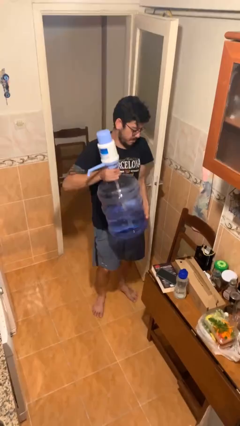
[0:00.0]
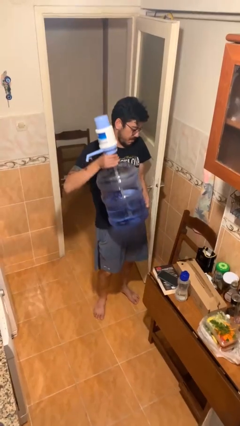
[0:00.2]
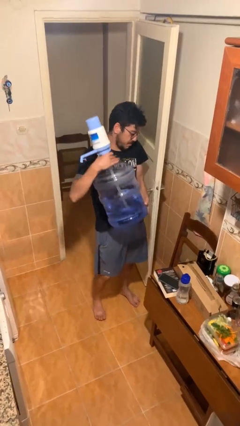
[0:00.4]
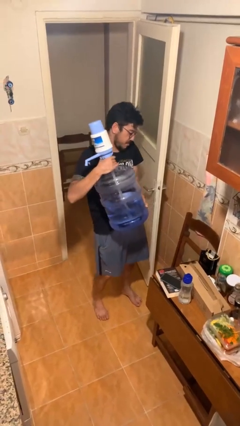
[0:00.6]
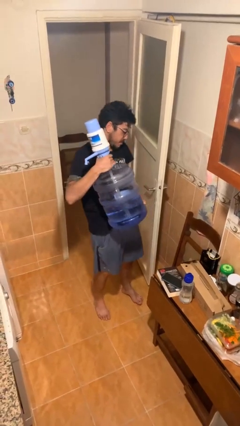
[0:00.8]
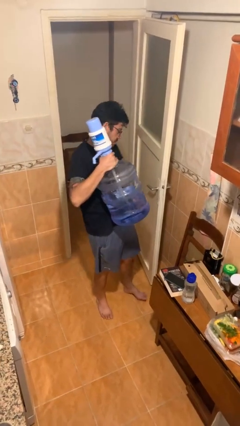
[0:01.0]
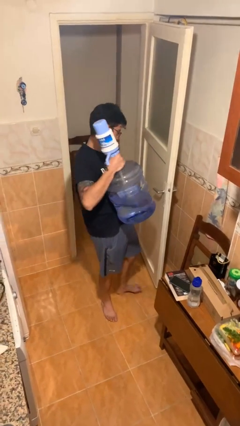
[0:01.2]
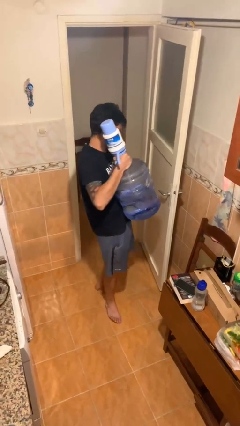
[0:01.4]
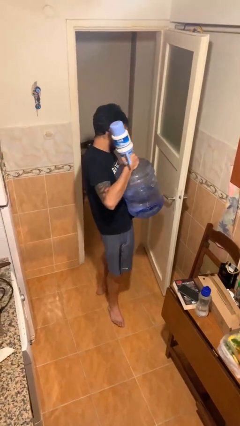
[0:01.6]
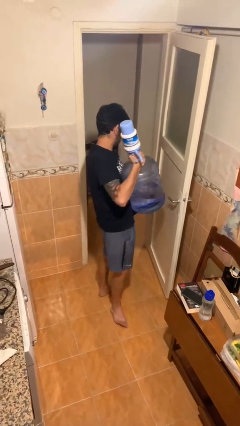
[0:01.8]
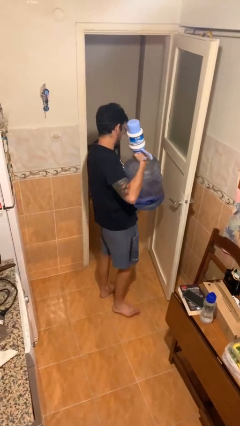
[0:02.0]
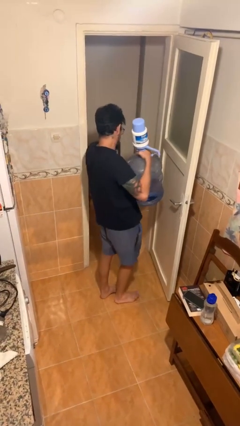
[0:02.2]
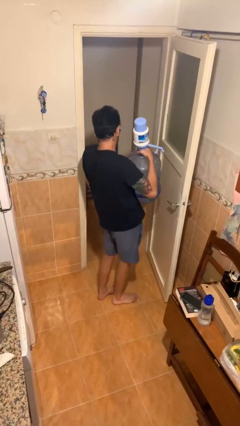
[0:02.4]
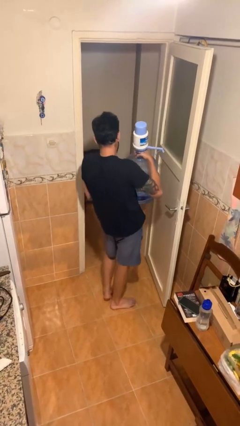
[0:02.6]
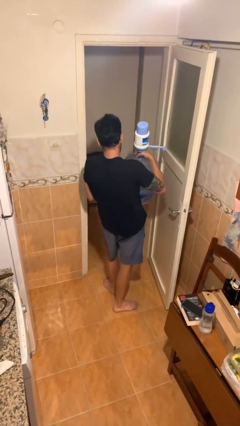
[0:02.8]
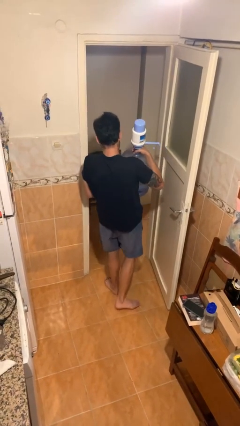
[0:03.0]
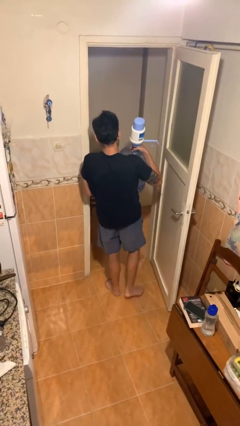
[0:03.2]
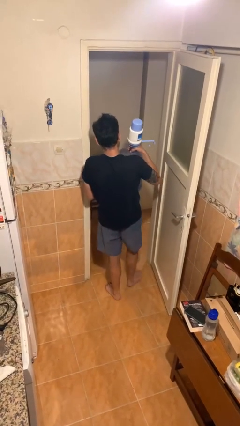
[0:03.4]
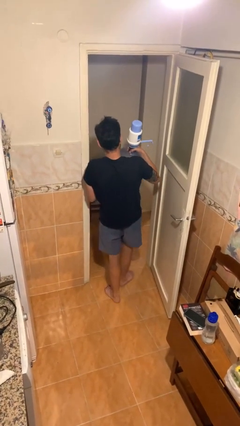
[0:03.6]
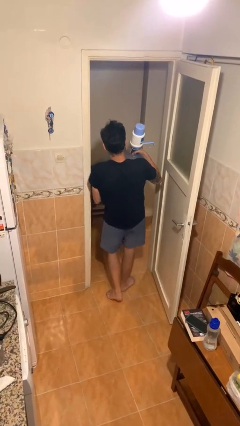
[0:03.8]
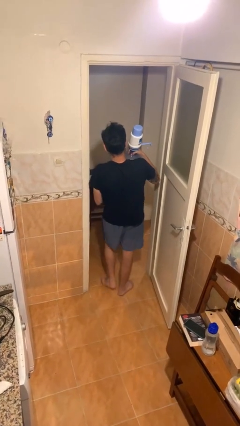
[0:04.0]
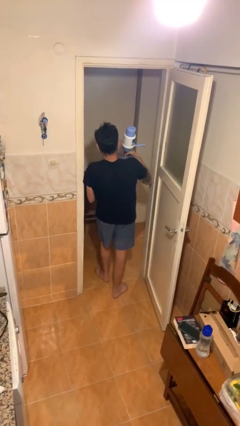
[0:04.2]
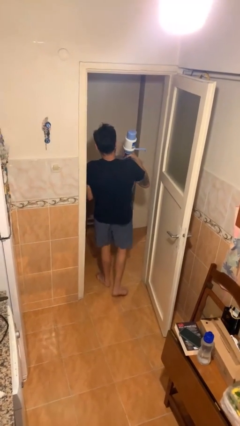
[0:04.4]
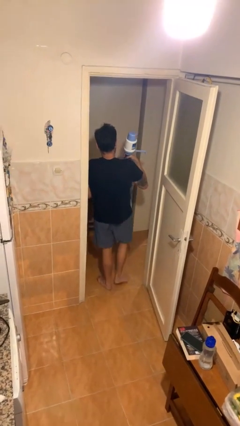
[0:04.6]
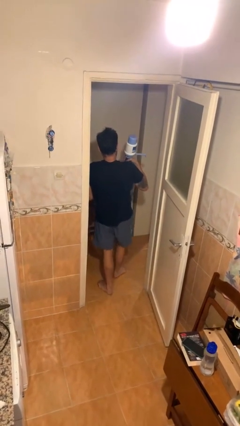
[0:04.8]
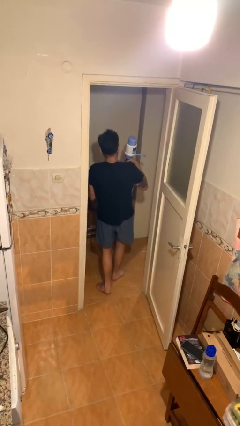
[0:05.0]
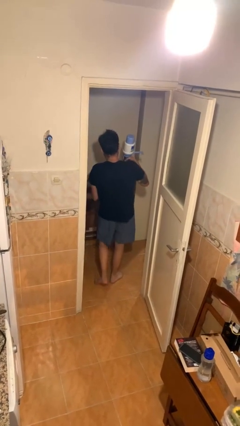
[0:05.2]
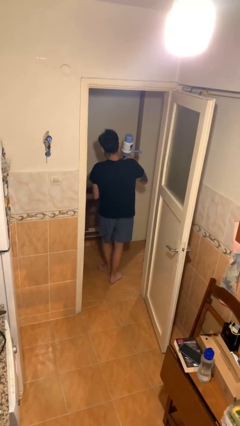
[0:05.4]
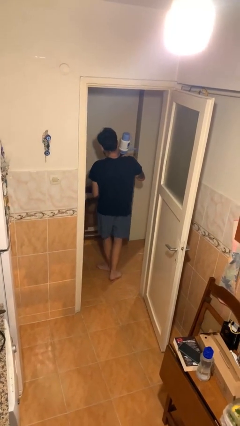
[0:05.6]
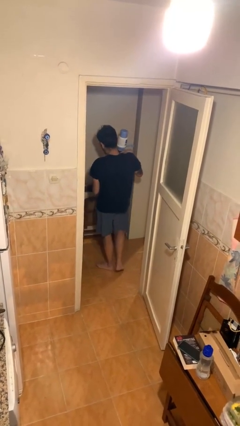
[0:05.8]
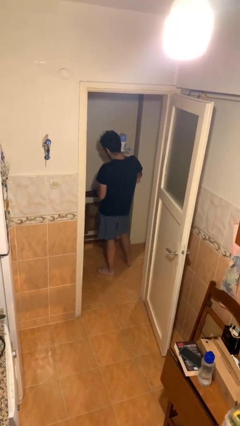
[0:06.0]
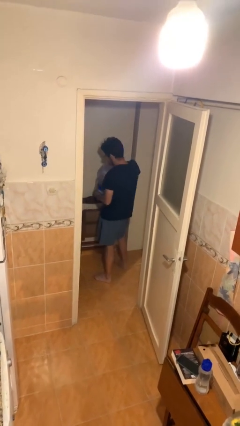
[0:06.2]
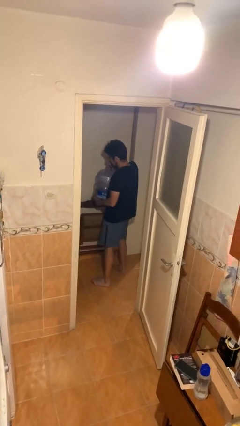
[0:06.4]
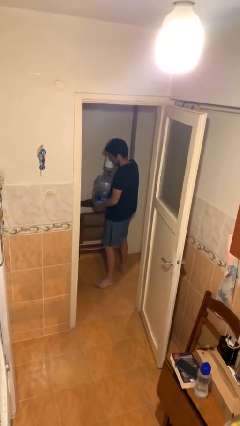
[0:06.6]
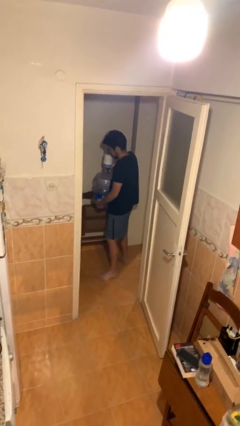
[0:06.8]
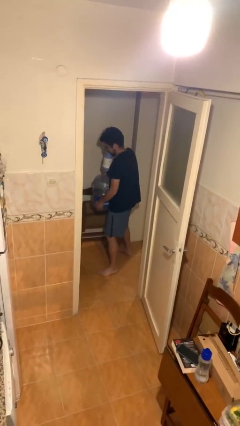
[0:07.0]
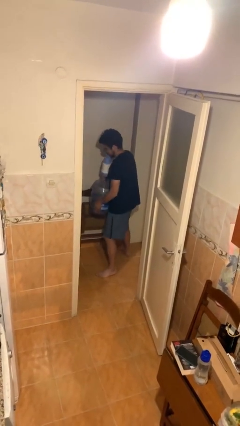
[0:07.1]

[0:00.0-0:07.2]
person carries heavy object

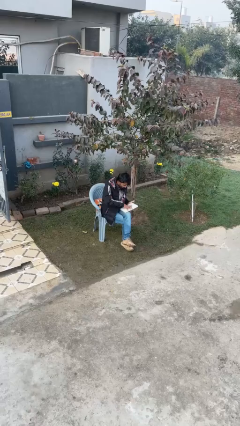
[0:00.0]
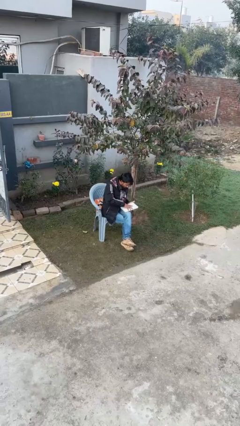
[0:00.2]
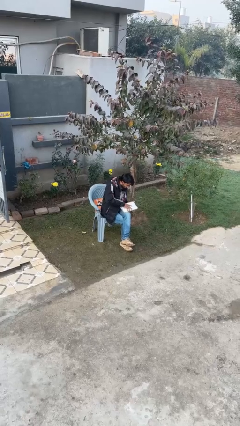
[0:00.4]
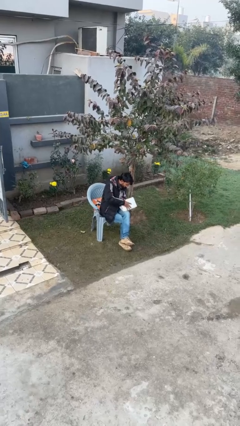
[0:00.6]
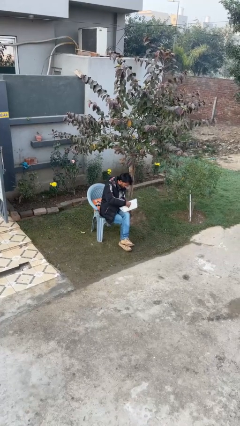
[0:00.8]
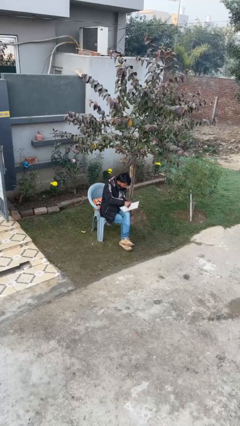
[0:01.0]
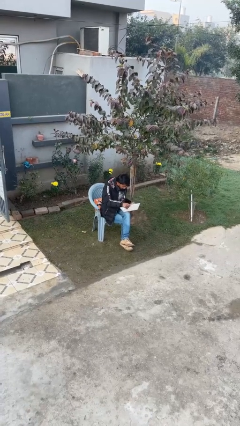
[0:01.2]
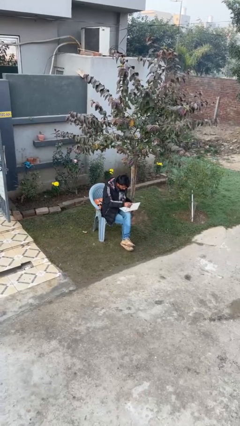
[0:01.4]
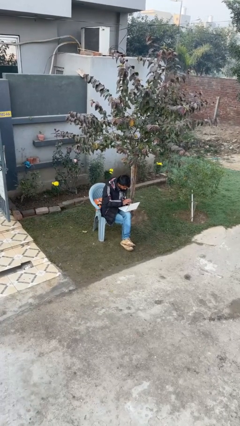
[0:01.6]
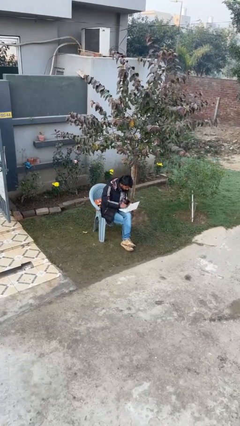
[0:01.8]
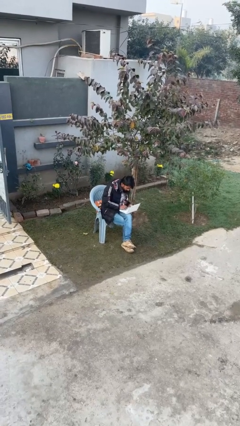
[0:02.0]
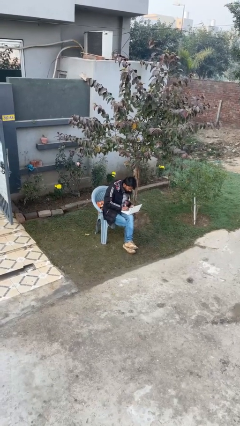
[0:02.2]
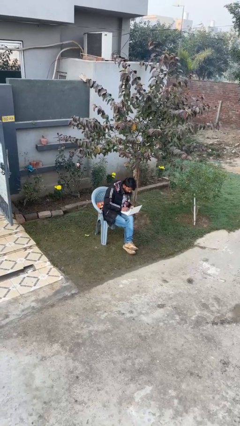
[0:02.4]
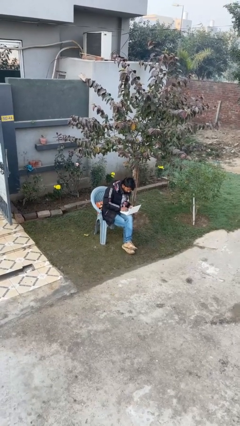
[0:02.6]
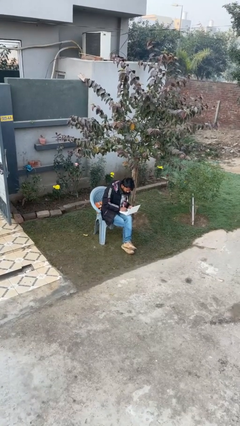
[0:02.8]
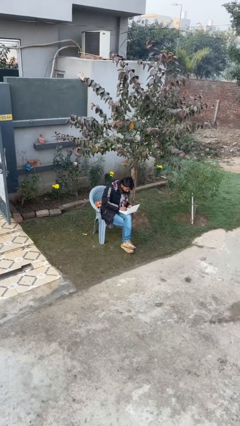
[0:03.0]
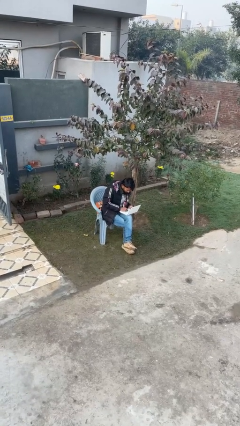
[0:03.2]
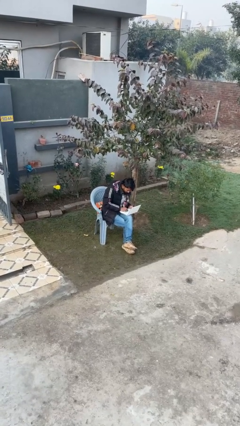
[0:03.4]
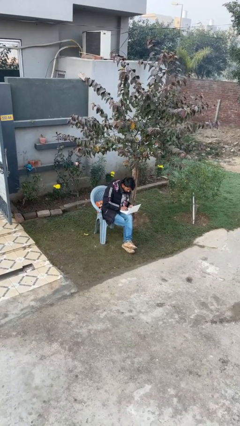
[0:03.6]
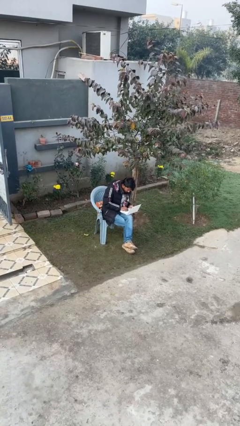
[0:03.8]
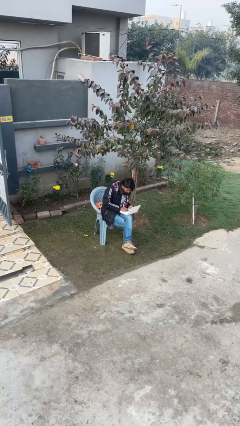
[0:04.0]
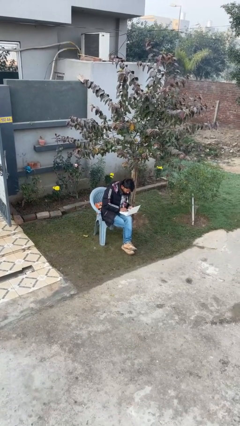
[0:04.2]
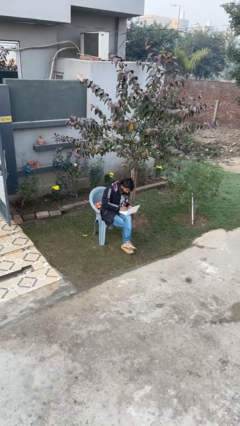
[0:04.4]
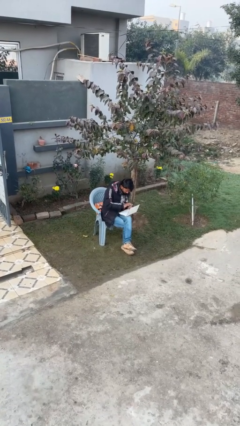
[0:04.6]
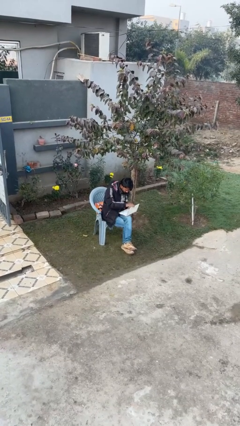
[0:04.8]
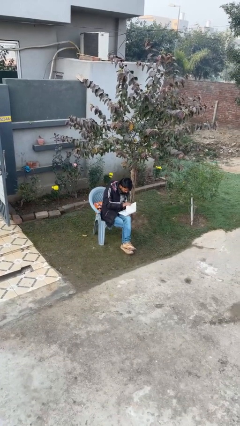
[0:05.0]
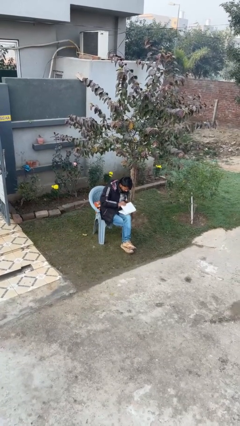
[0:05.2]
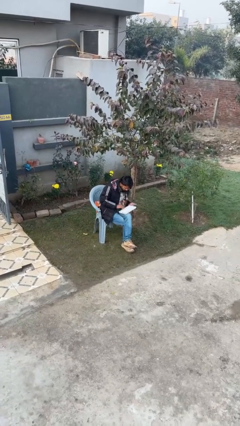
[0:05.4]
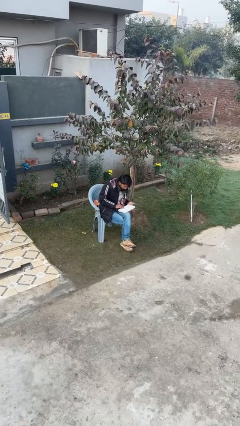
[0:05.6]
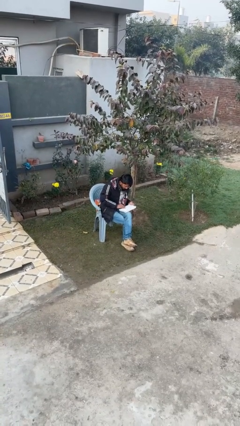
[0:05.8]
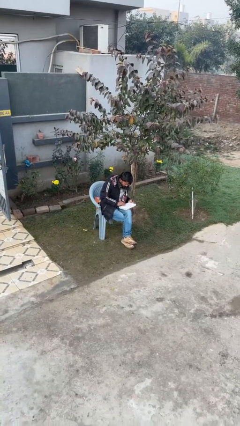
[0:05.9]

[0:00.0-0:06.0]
person interacts with laptop

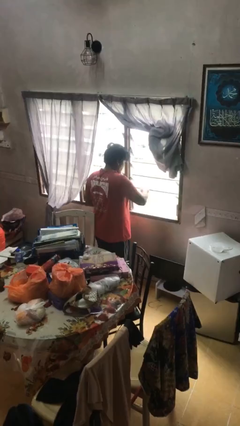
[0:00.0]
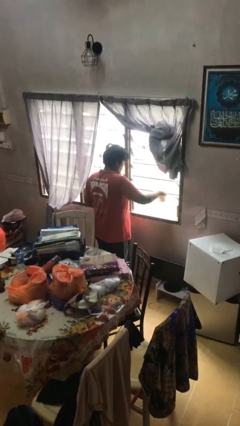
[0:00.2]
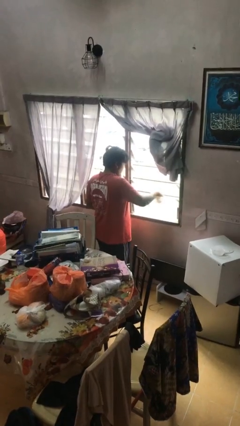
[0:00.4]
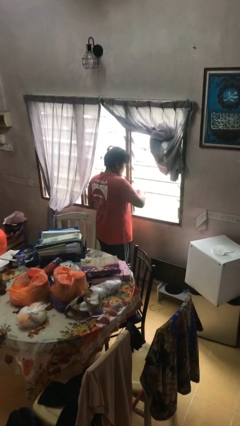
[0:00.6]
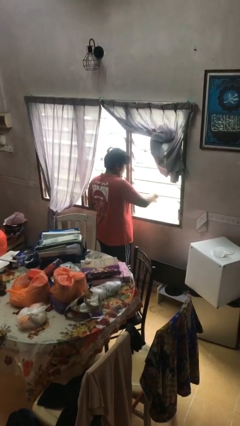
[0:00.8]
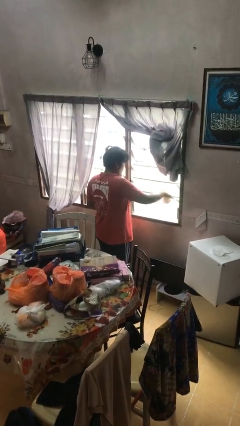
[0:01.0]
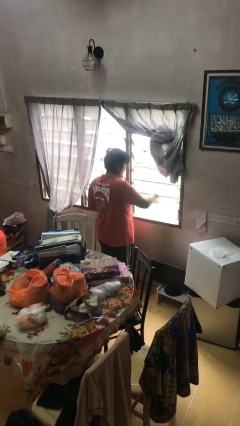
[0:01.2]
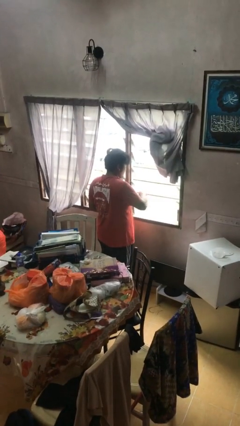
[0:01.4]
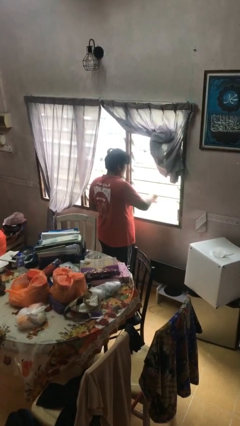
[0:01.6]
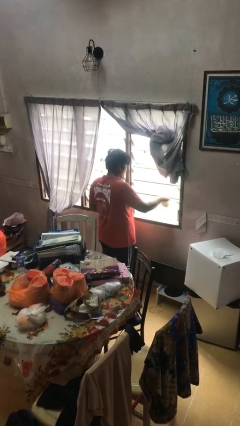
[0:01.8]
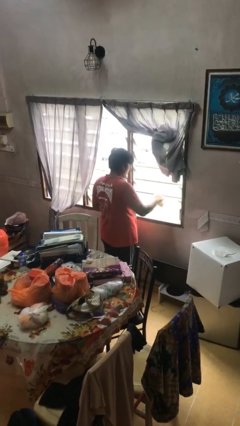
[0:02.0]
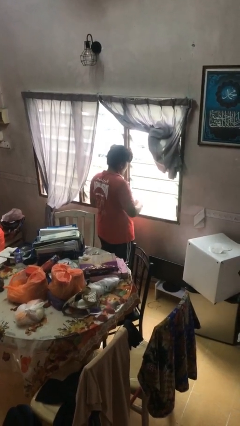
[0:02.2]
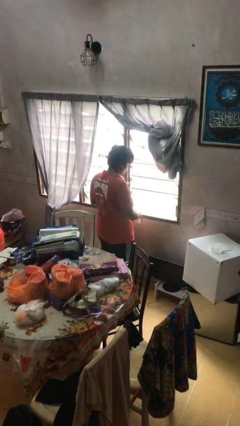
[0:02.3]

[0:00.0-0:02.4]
person washes window

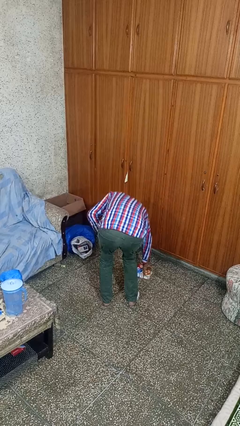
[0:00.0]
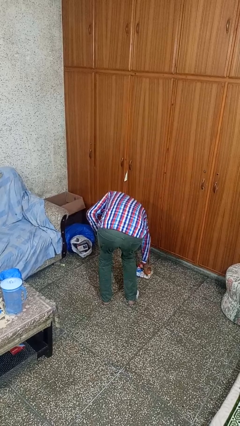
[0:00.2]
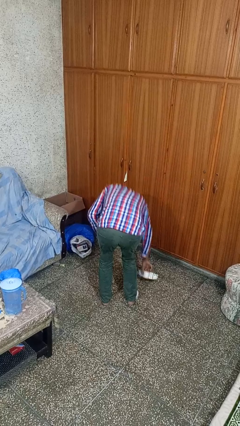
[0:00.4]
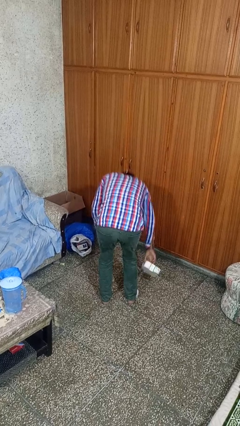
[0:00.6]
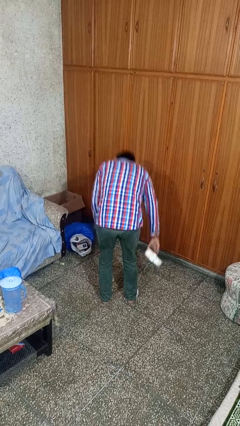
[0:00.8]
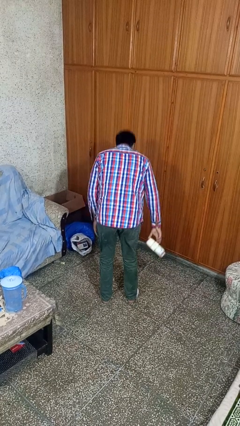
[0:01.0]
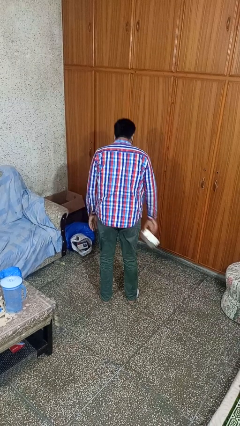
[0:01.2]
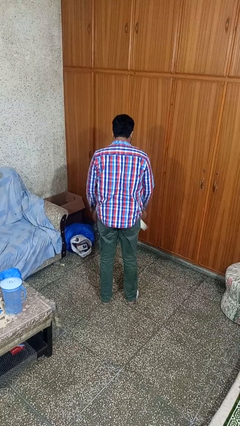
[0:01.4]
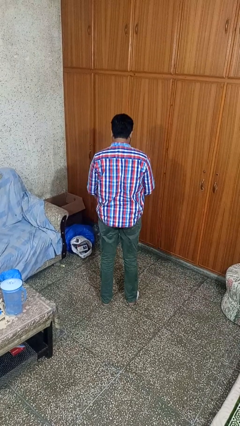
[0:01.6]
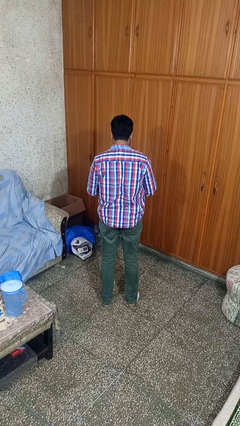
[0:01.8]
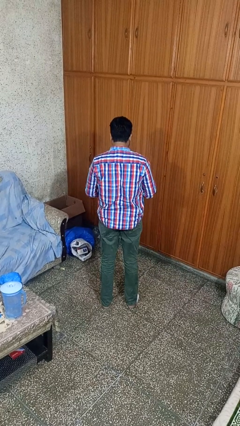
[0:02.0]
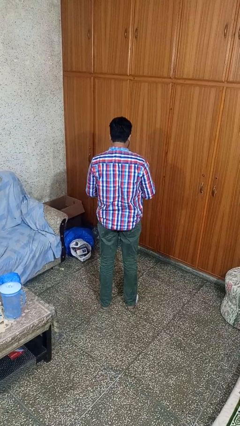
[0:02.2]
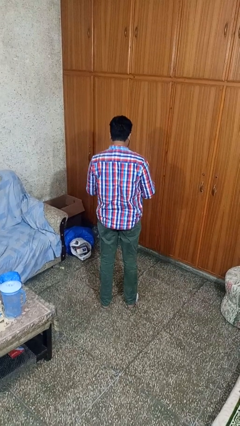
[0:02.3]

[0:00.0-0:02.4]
person picks up object from floor

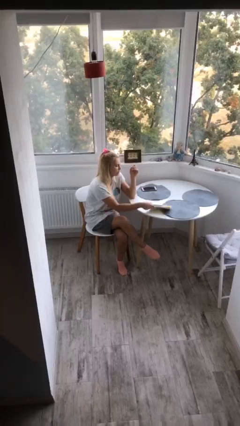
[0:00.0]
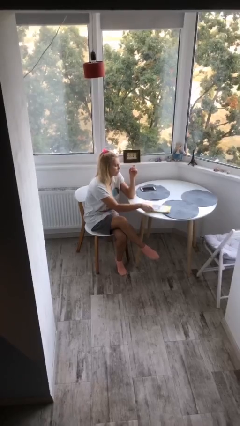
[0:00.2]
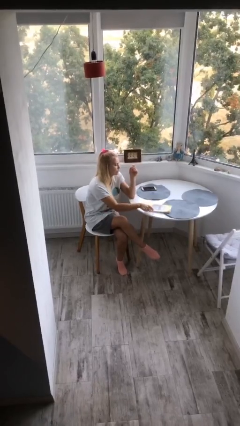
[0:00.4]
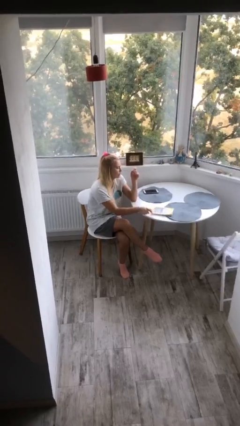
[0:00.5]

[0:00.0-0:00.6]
person puts down object on table
